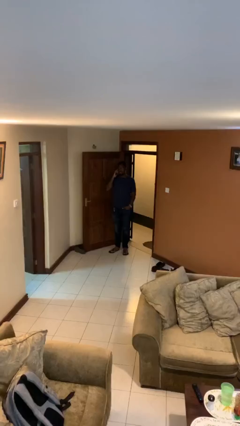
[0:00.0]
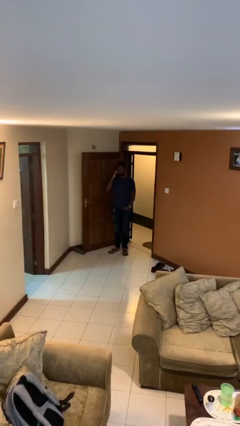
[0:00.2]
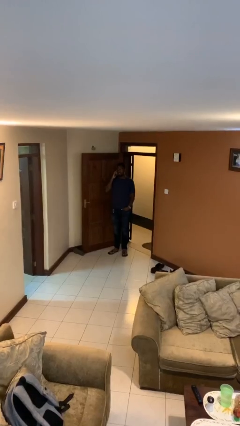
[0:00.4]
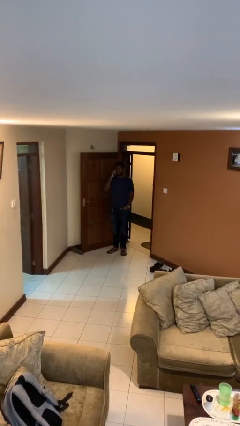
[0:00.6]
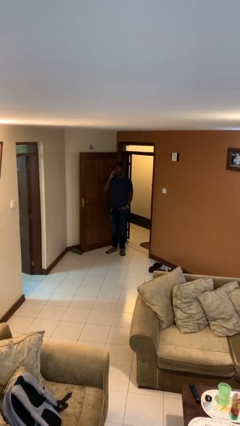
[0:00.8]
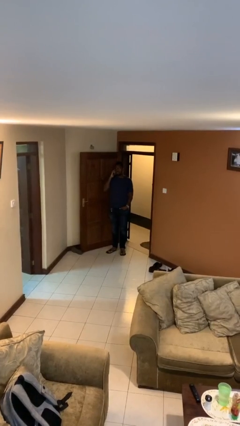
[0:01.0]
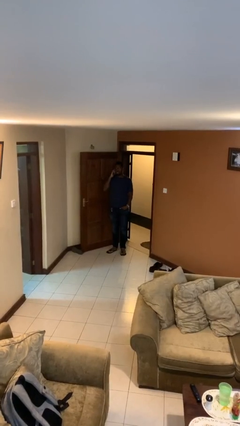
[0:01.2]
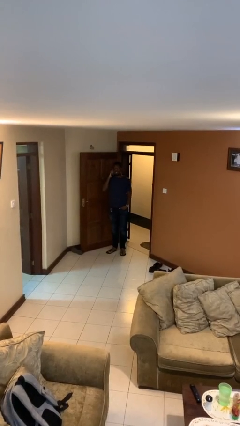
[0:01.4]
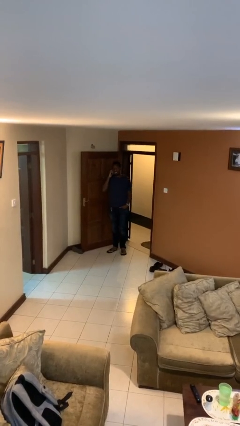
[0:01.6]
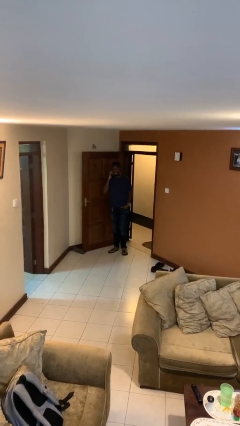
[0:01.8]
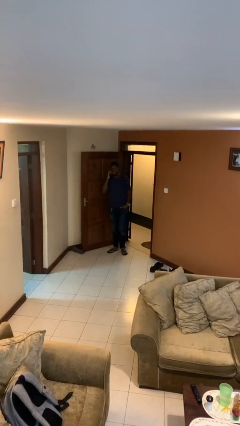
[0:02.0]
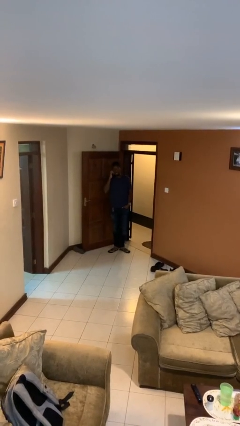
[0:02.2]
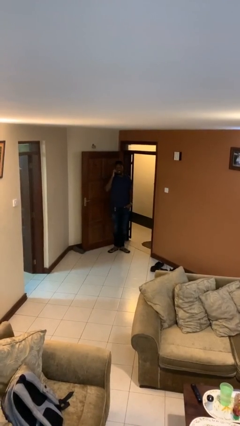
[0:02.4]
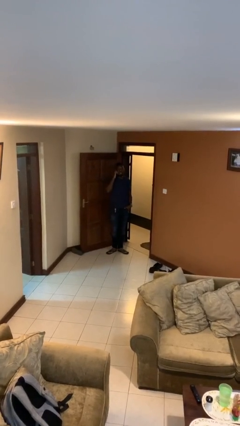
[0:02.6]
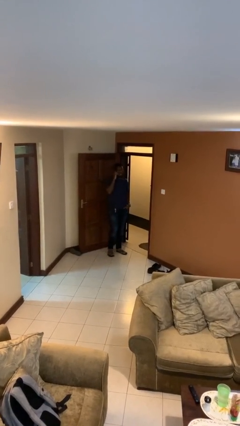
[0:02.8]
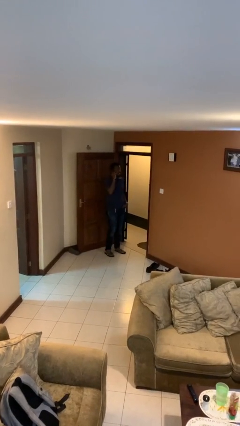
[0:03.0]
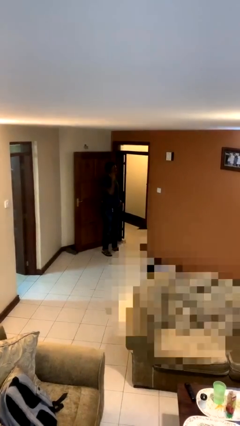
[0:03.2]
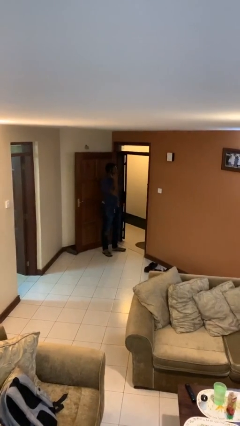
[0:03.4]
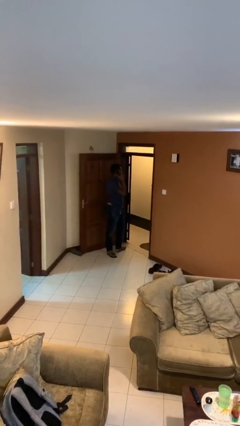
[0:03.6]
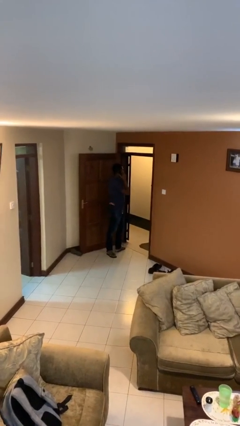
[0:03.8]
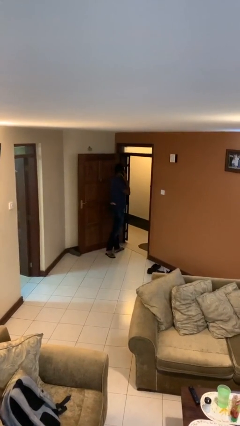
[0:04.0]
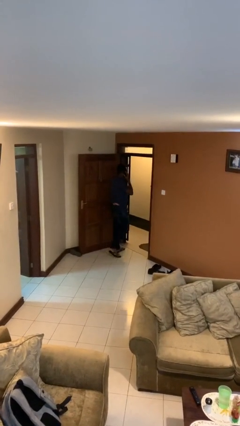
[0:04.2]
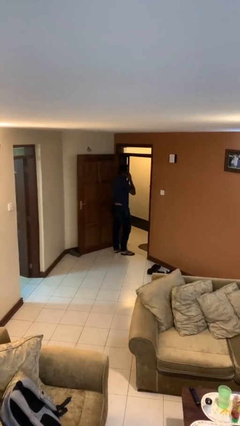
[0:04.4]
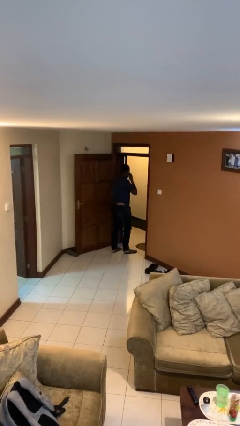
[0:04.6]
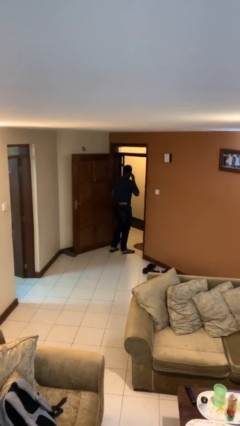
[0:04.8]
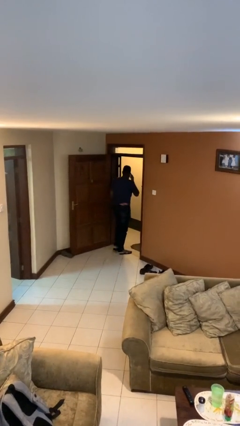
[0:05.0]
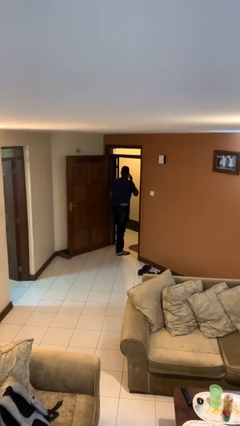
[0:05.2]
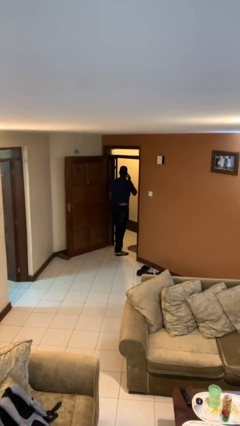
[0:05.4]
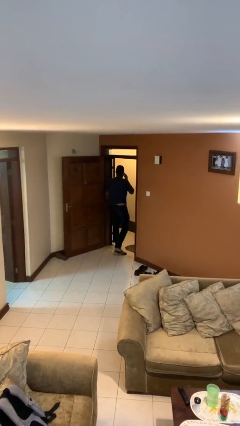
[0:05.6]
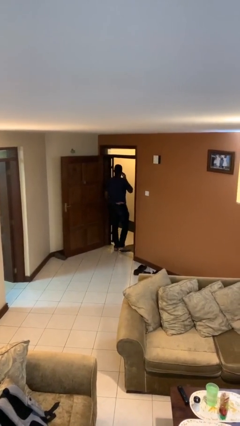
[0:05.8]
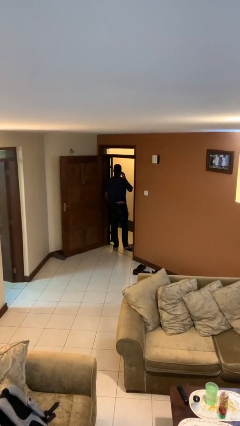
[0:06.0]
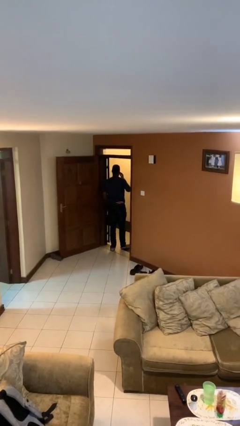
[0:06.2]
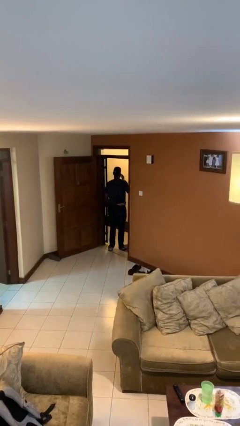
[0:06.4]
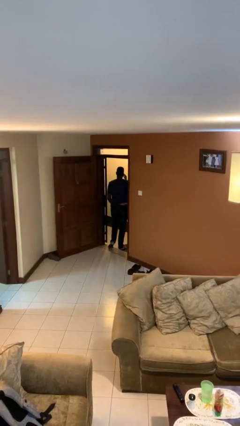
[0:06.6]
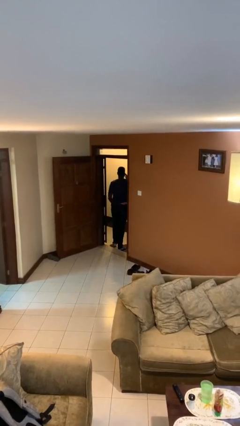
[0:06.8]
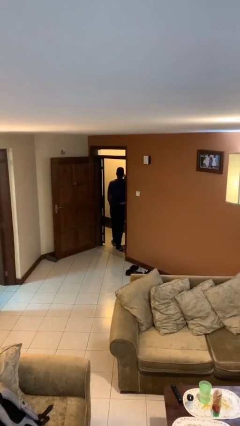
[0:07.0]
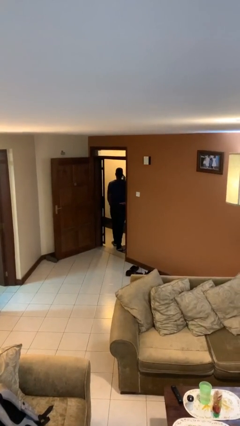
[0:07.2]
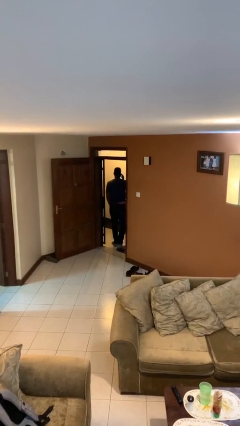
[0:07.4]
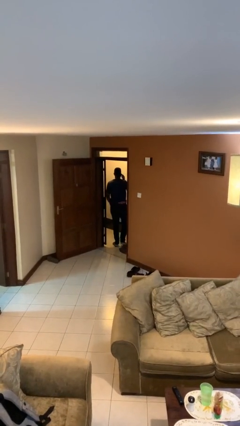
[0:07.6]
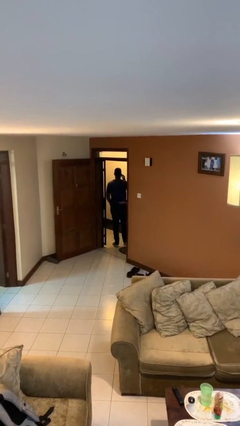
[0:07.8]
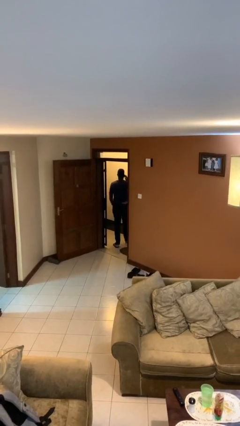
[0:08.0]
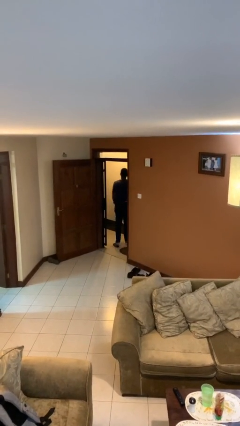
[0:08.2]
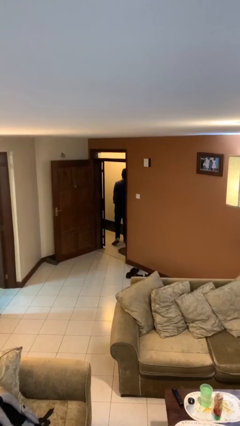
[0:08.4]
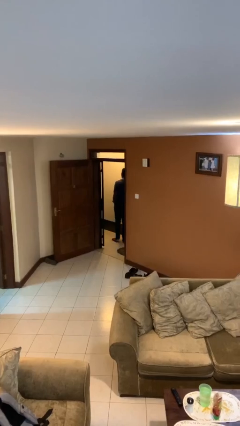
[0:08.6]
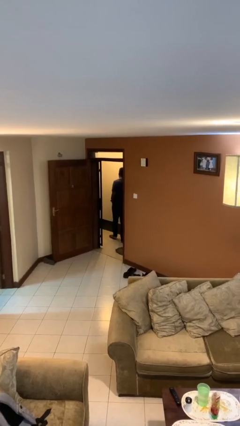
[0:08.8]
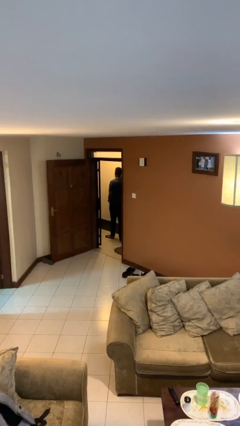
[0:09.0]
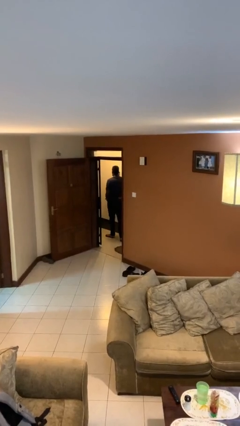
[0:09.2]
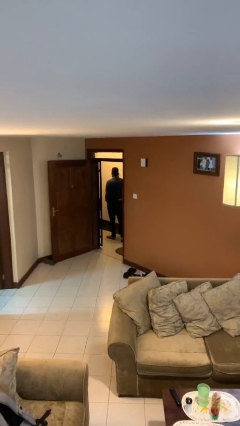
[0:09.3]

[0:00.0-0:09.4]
person exits scene through structure

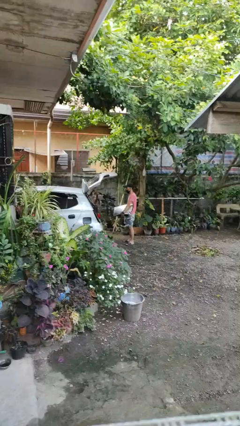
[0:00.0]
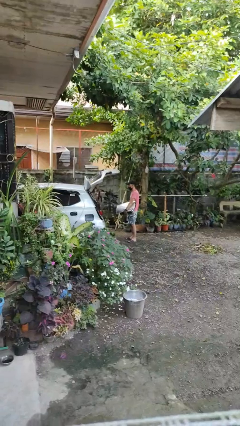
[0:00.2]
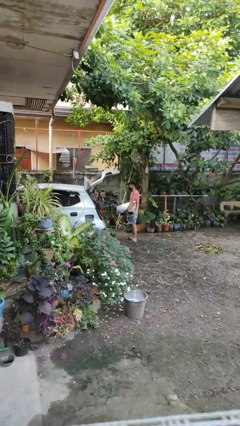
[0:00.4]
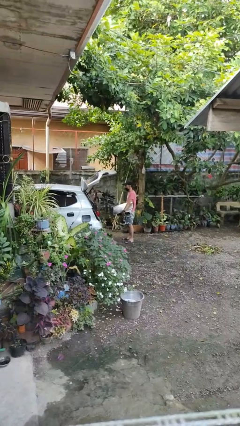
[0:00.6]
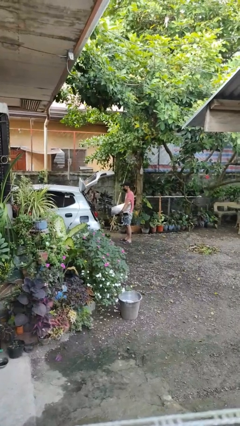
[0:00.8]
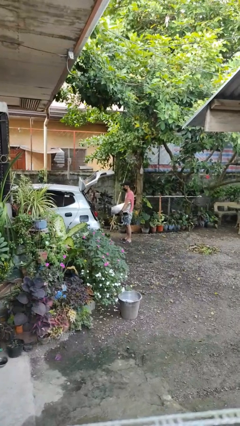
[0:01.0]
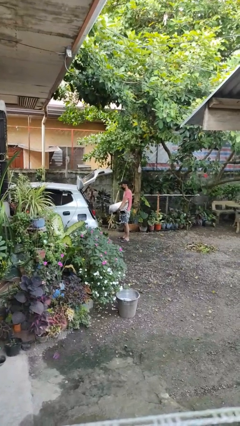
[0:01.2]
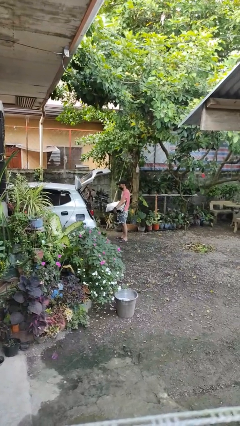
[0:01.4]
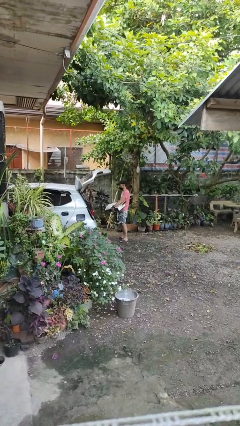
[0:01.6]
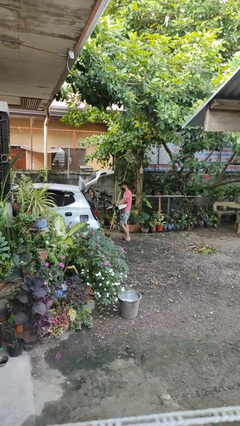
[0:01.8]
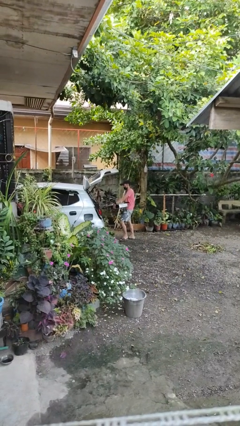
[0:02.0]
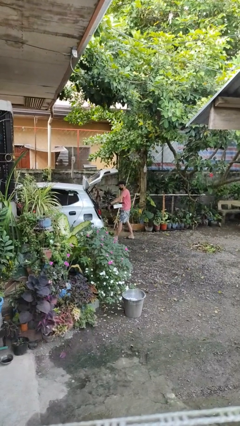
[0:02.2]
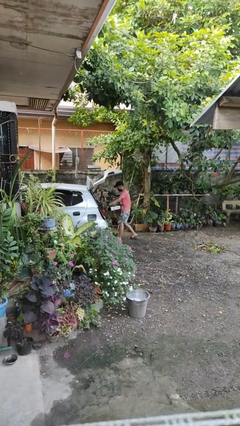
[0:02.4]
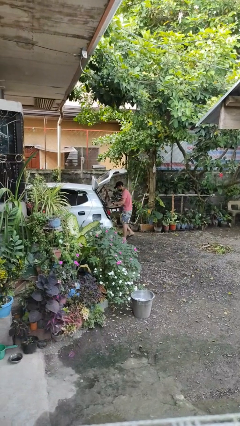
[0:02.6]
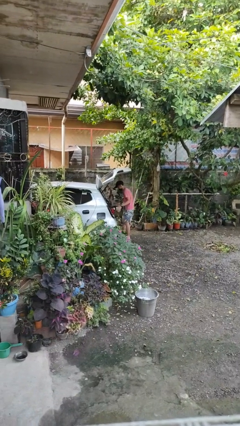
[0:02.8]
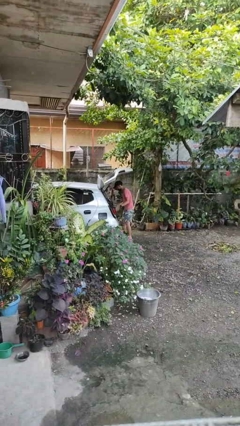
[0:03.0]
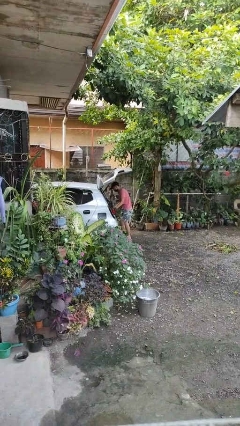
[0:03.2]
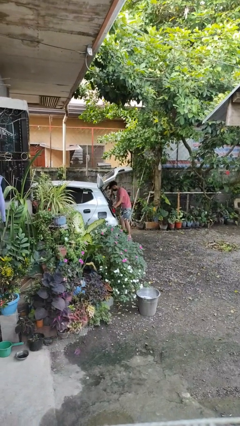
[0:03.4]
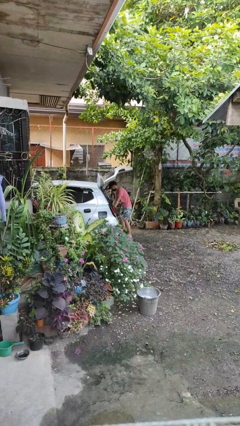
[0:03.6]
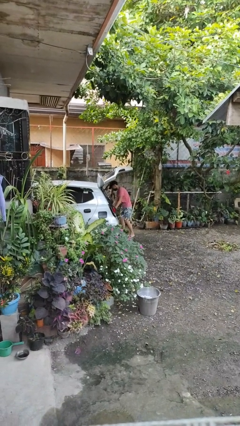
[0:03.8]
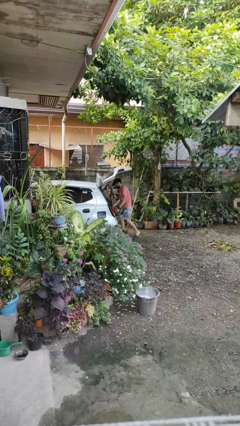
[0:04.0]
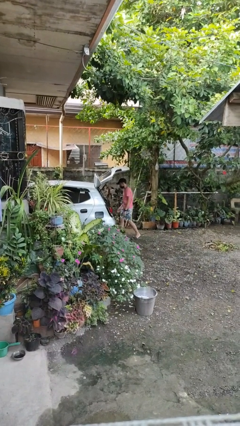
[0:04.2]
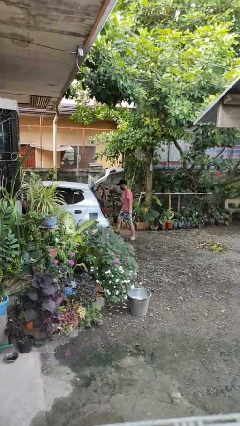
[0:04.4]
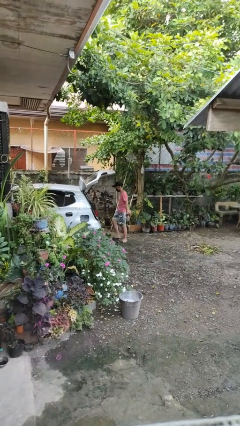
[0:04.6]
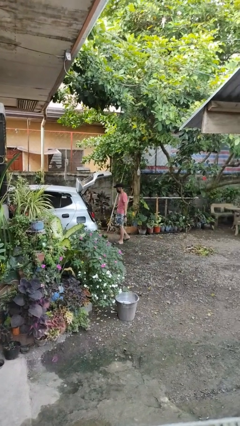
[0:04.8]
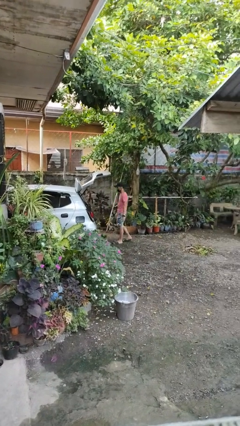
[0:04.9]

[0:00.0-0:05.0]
person loads car

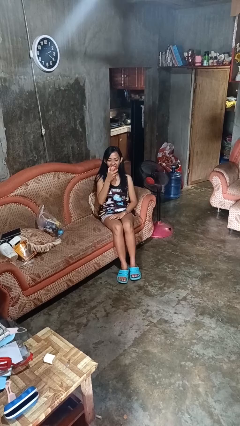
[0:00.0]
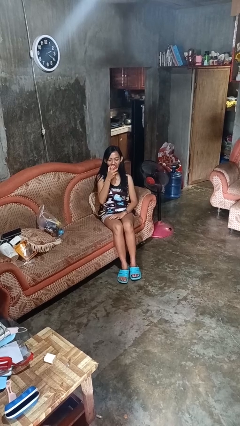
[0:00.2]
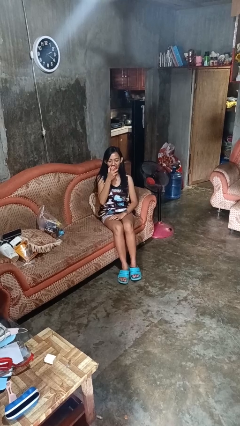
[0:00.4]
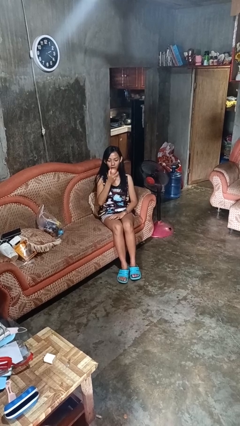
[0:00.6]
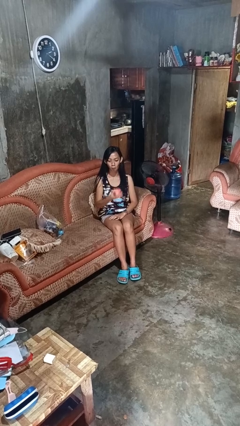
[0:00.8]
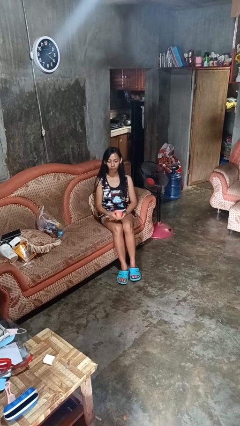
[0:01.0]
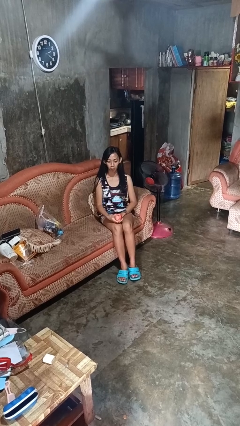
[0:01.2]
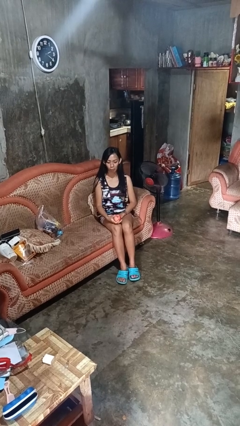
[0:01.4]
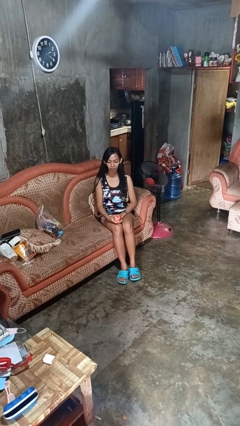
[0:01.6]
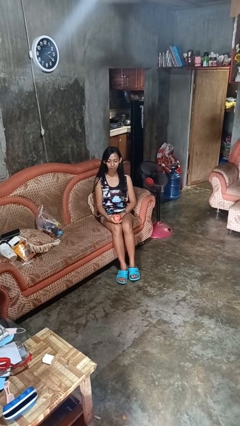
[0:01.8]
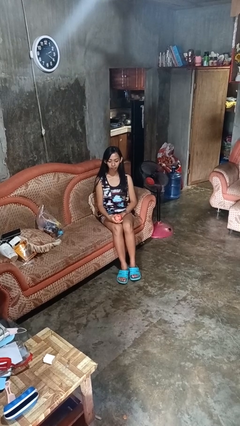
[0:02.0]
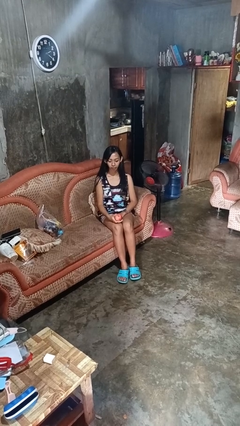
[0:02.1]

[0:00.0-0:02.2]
person eats apple

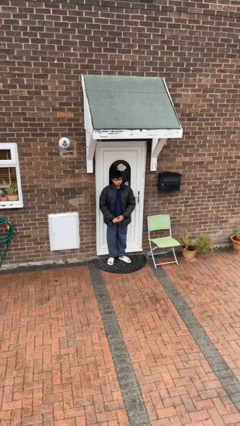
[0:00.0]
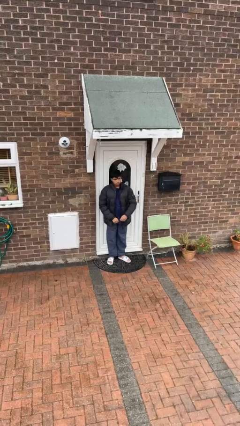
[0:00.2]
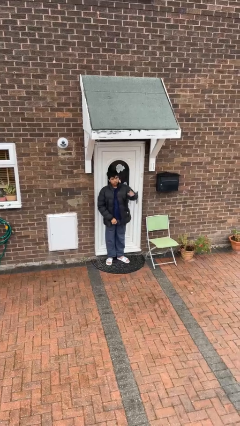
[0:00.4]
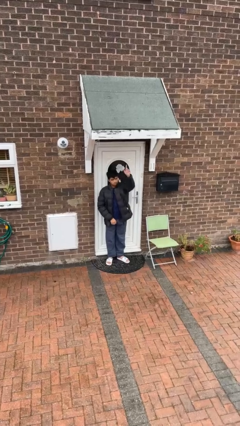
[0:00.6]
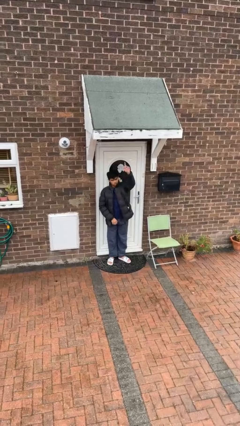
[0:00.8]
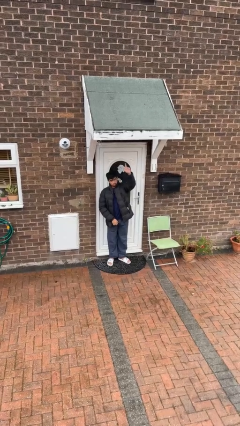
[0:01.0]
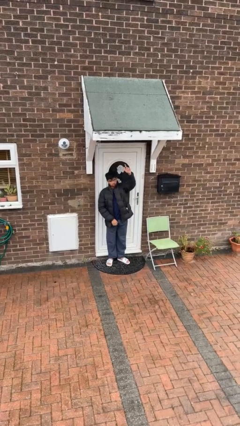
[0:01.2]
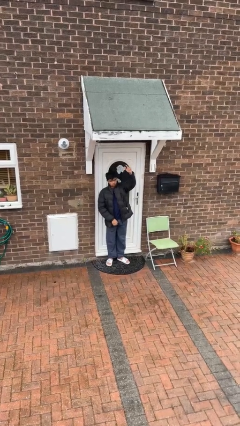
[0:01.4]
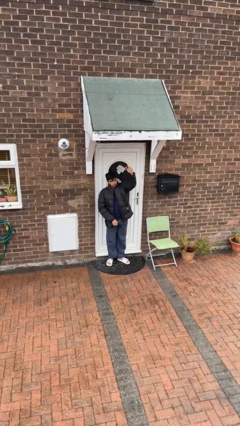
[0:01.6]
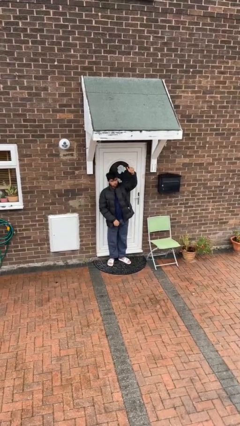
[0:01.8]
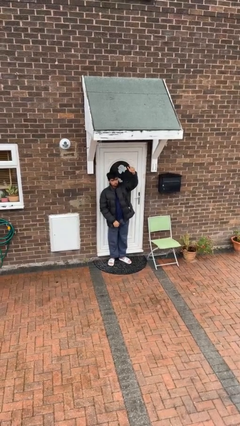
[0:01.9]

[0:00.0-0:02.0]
person gestures raise hand
